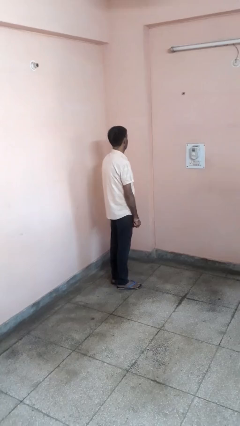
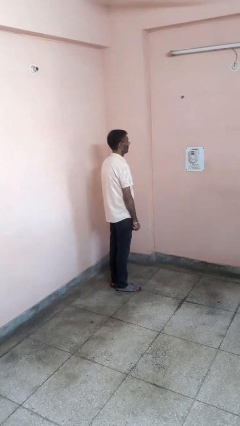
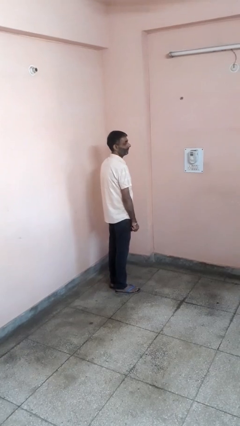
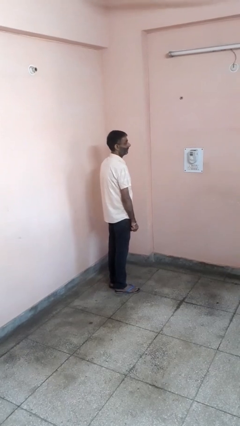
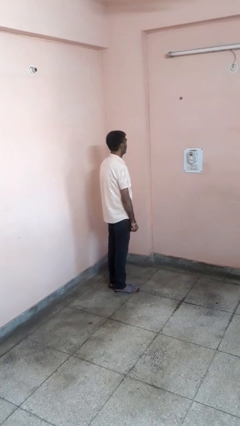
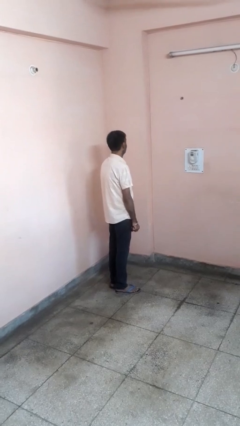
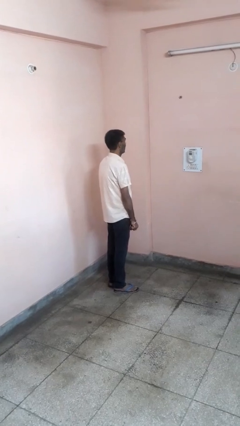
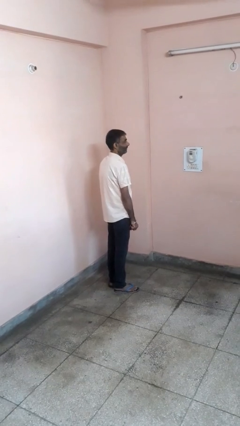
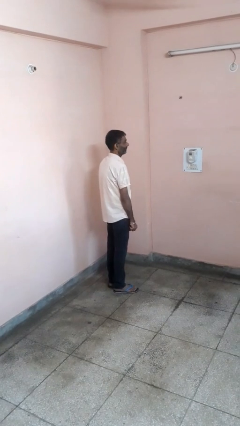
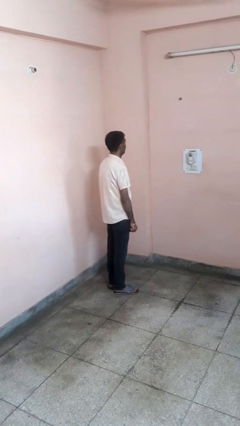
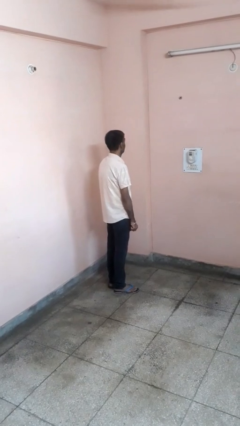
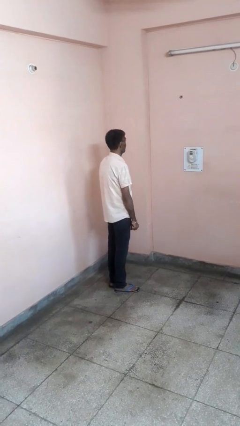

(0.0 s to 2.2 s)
person shakes head

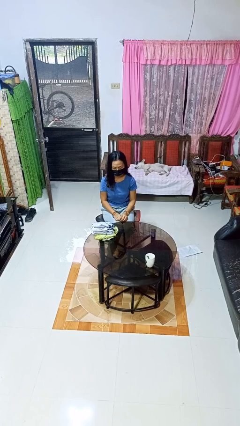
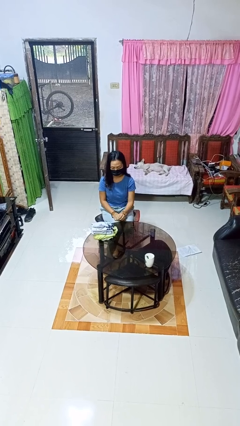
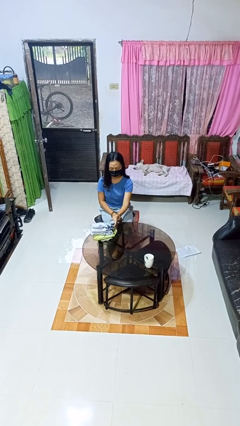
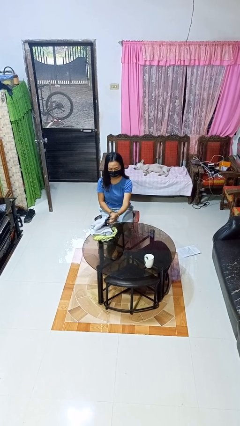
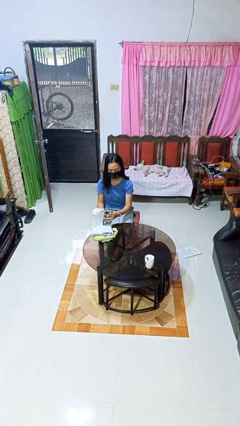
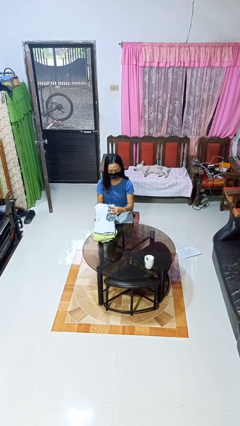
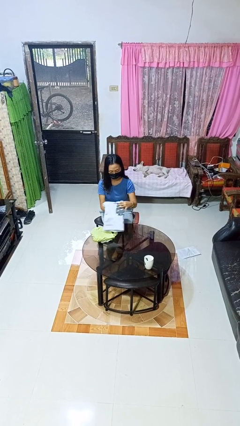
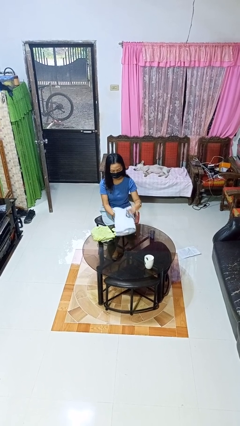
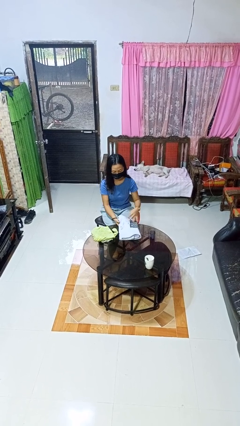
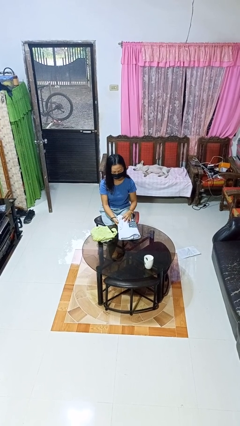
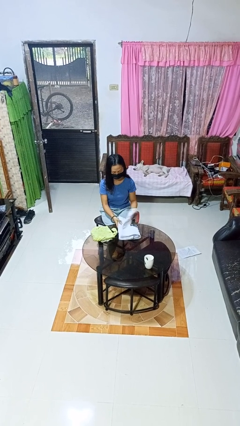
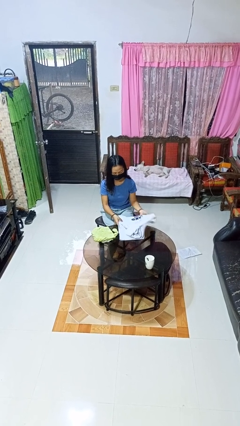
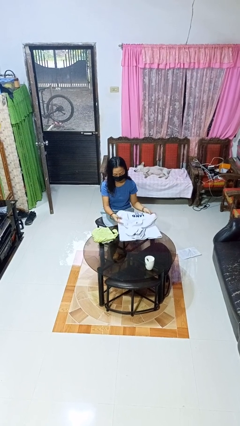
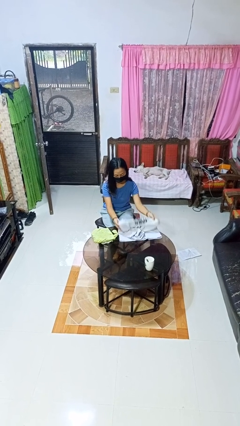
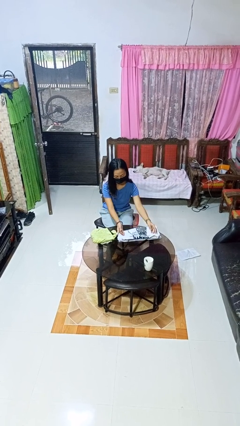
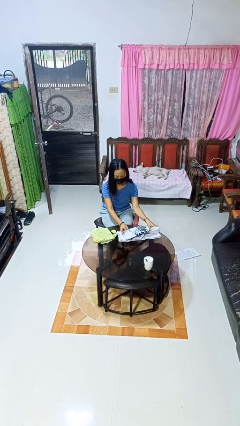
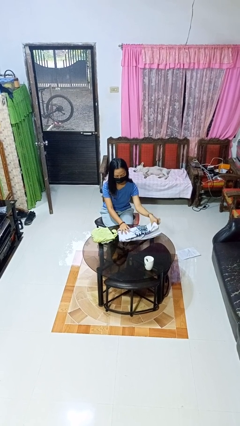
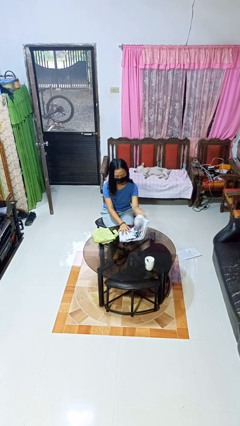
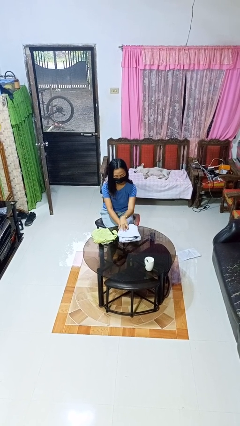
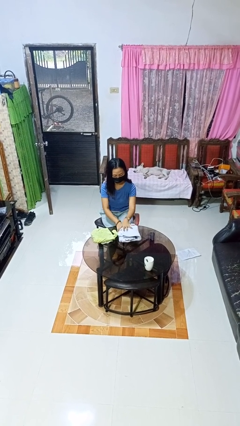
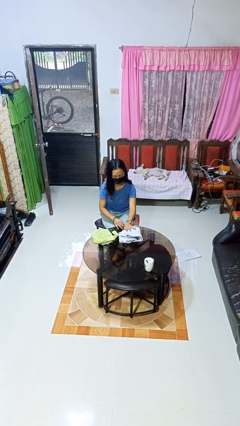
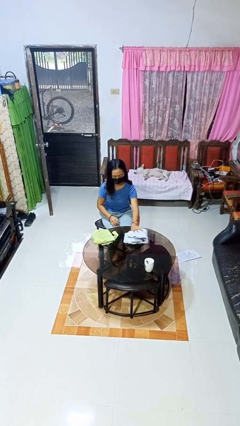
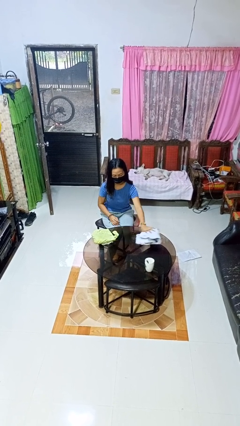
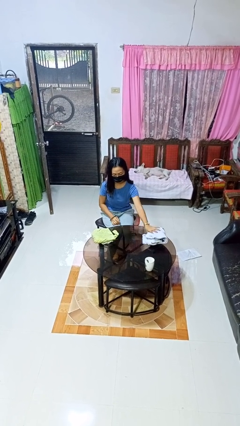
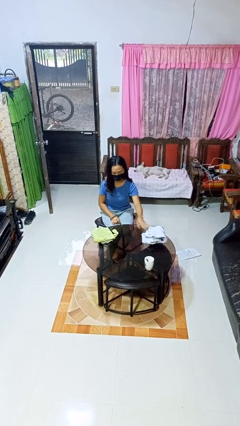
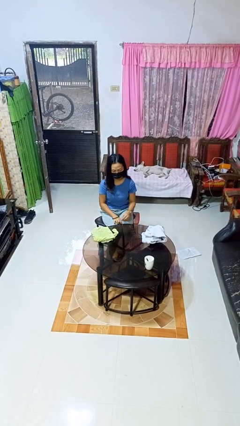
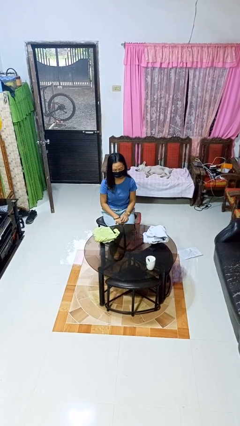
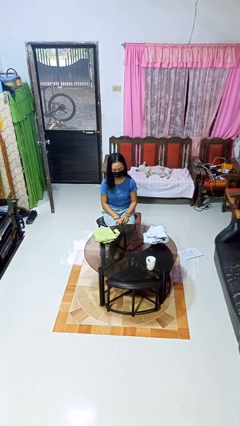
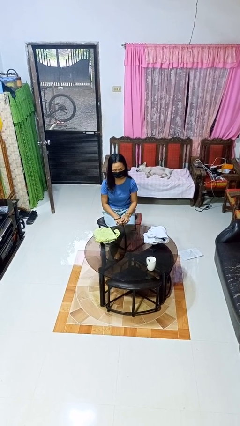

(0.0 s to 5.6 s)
person folds towel

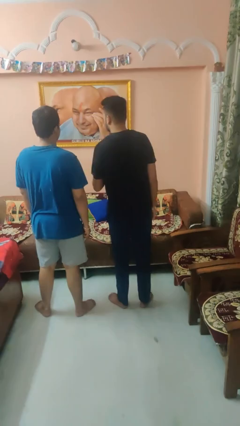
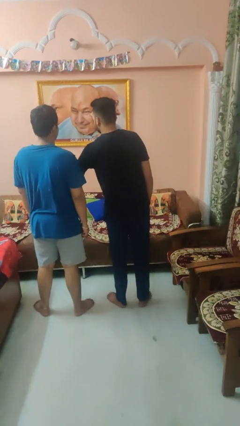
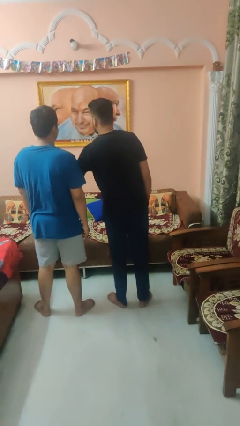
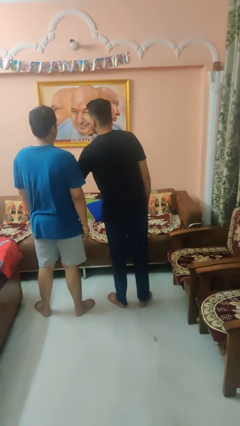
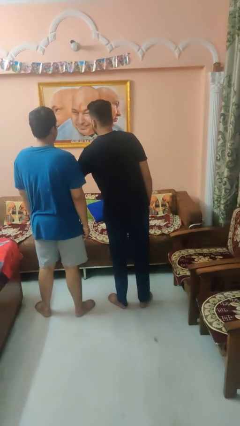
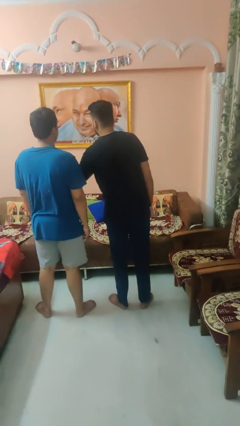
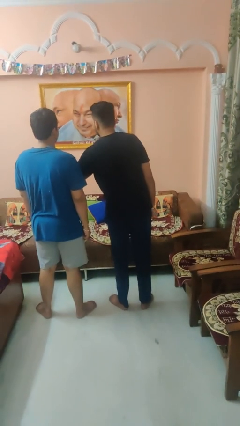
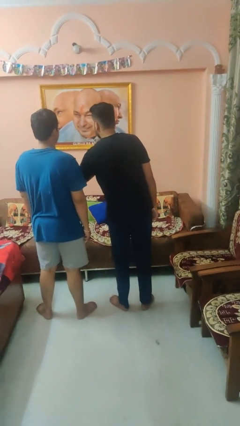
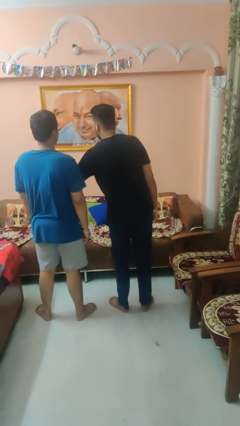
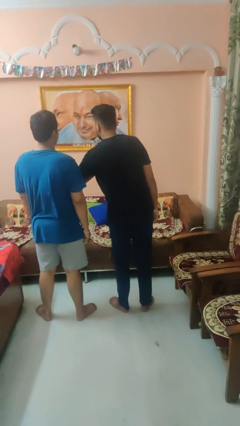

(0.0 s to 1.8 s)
person nudges person with elbow

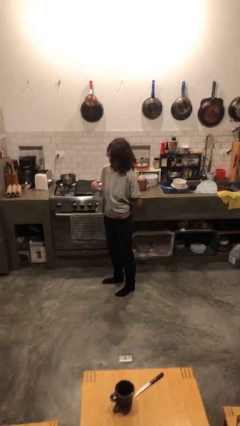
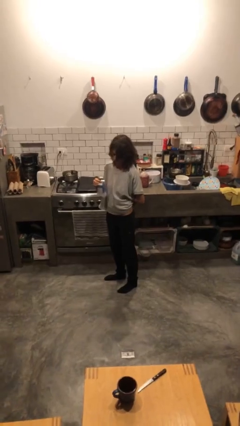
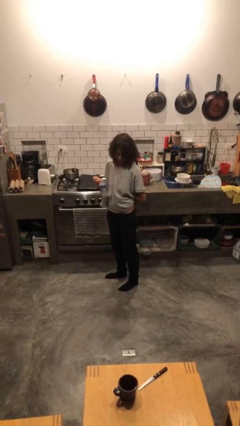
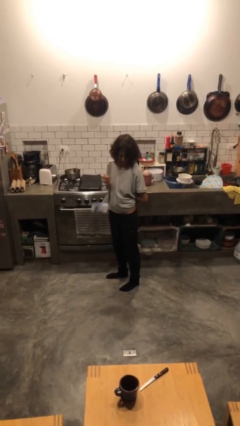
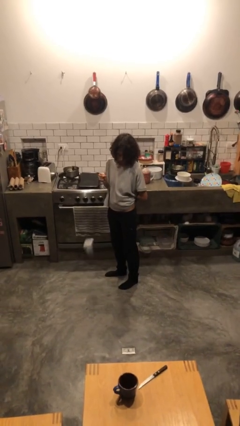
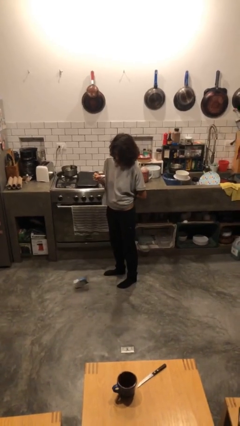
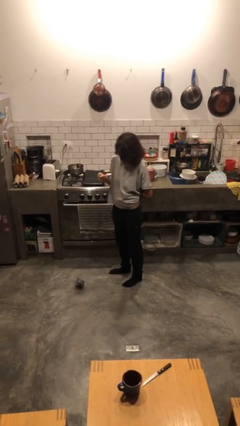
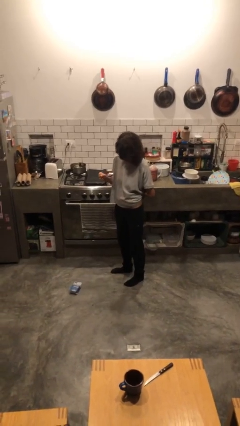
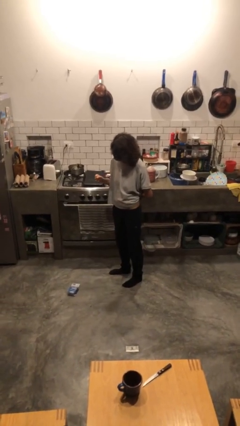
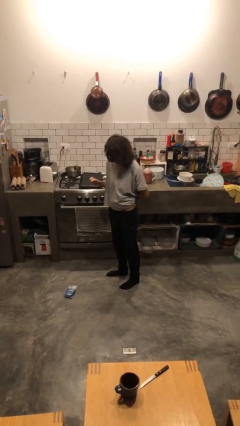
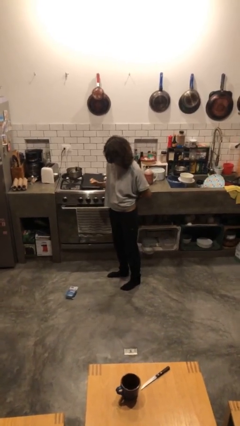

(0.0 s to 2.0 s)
person drops object

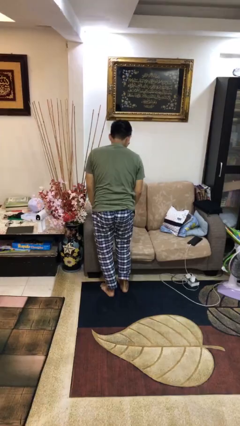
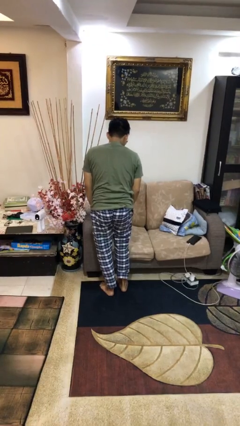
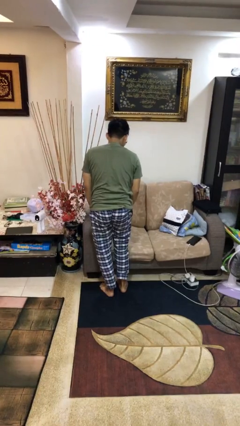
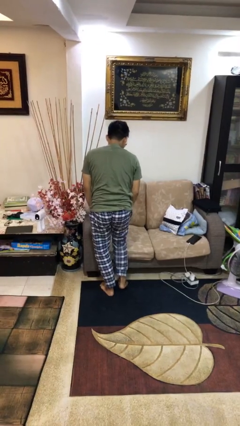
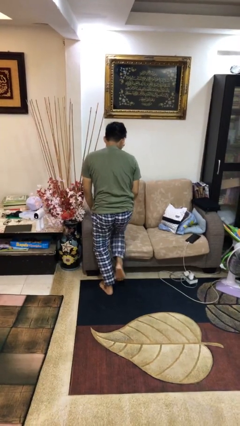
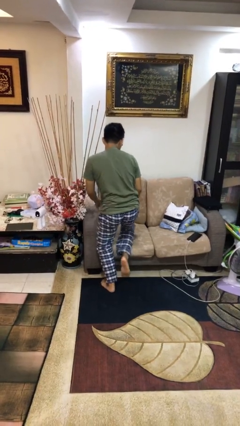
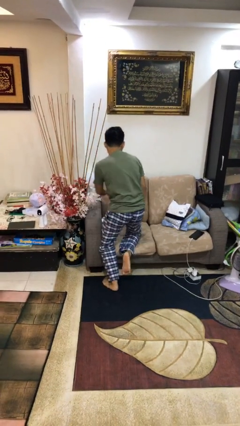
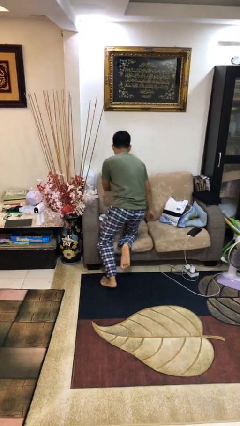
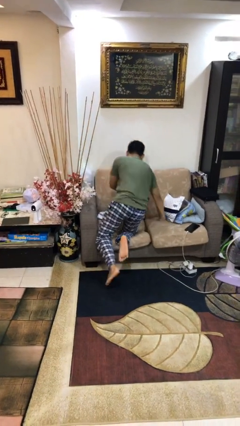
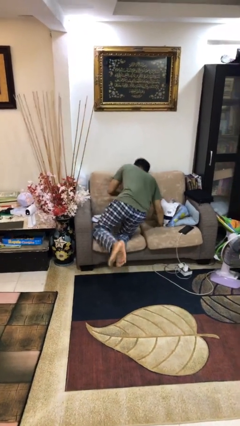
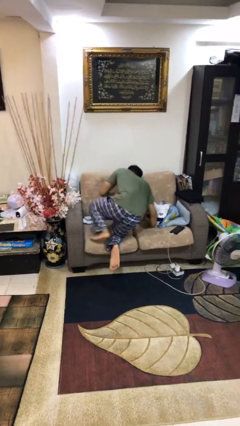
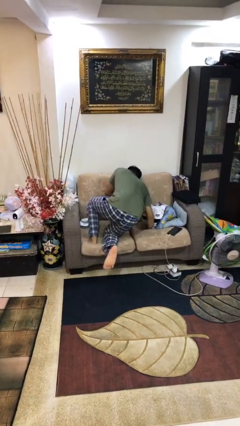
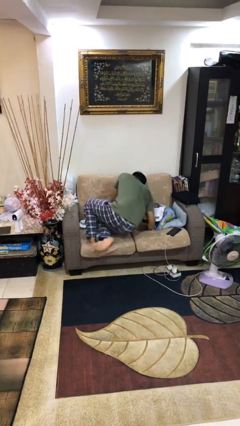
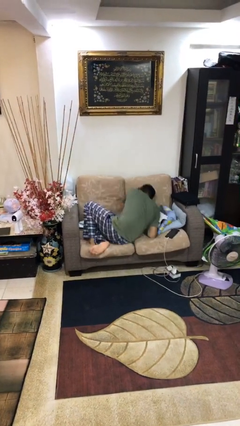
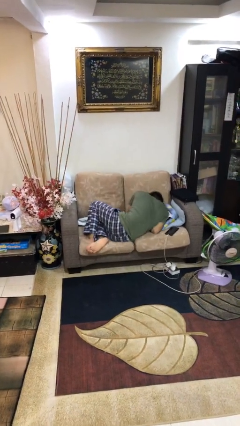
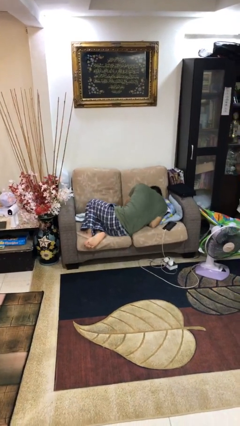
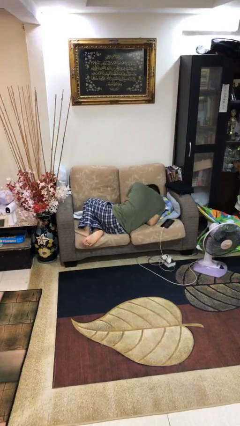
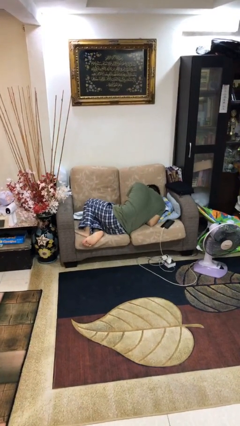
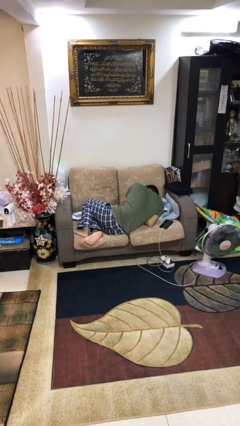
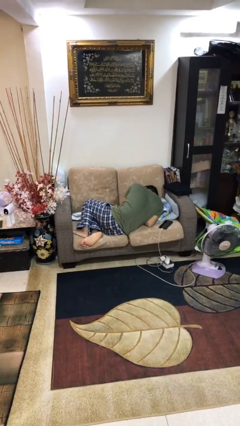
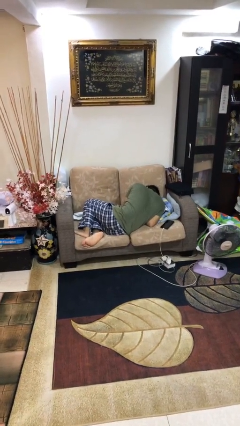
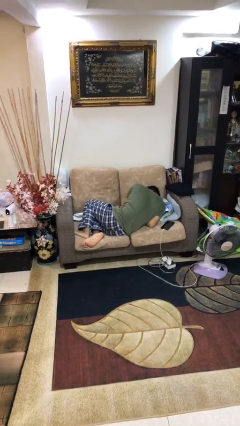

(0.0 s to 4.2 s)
person lies down on couch

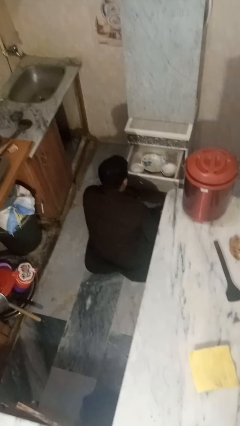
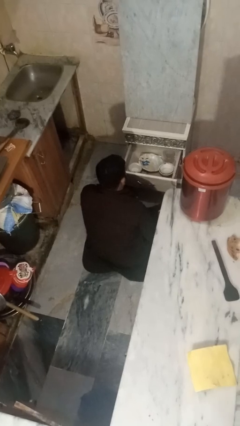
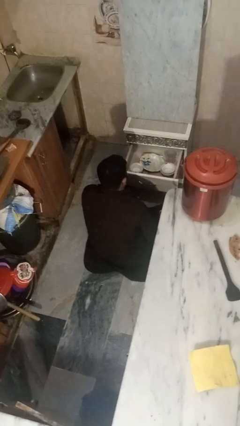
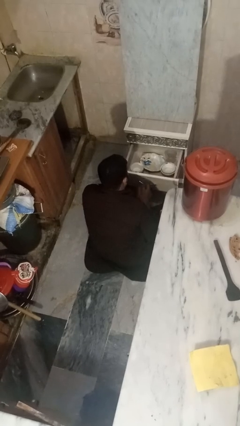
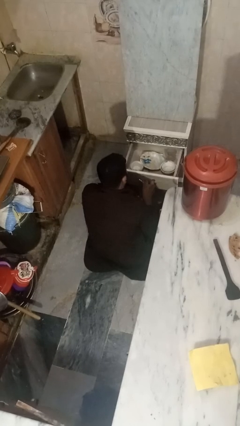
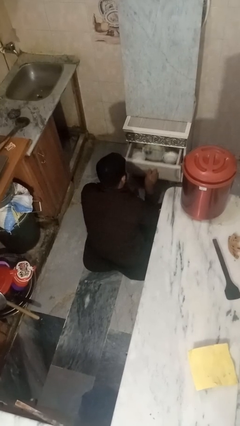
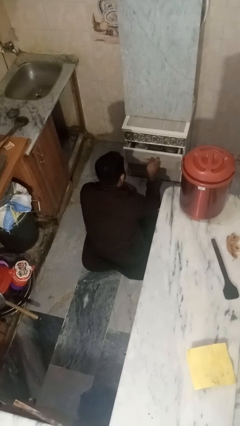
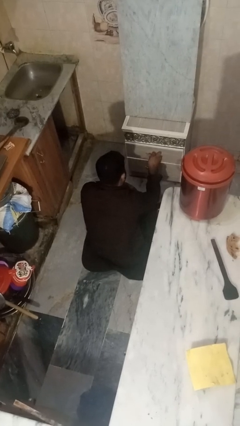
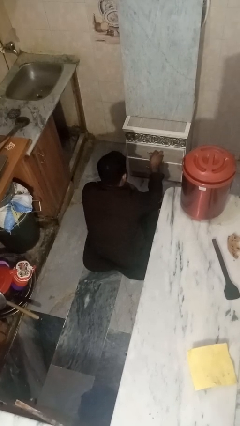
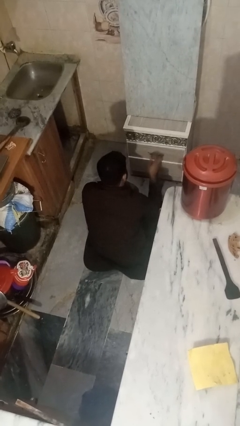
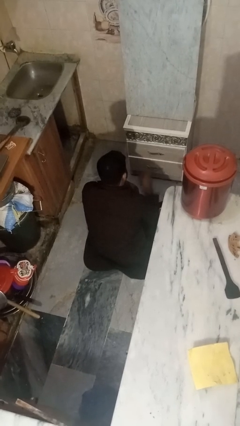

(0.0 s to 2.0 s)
person closes kitchen drawer
